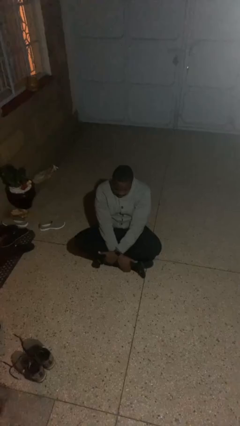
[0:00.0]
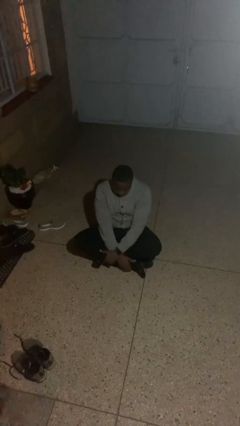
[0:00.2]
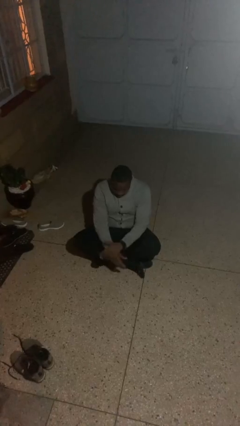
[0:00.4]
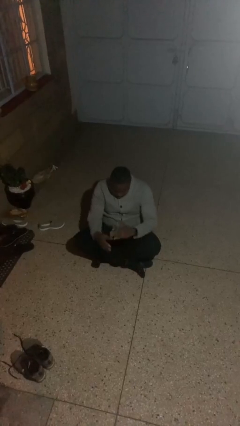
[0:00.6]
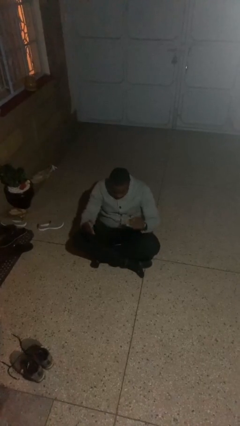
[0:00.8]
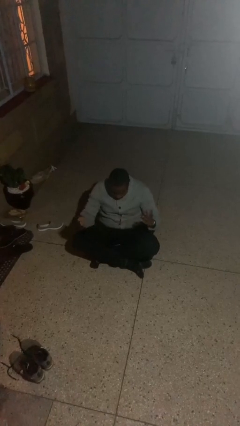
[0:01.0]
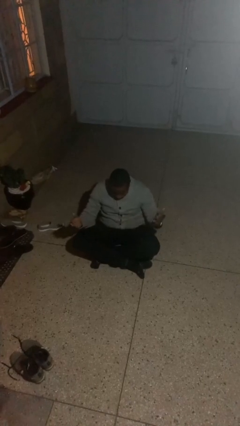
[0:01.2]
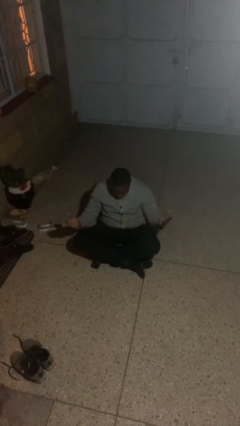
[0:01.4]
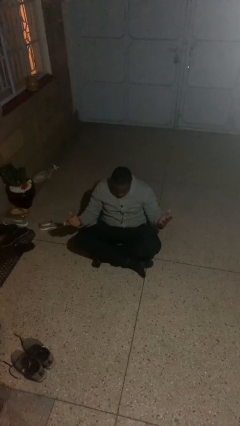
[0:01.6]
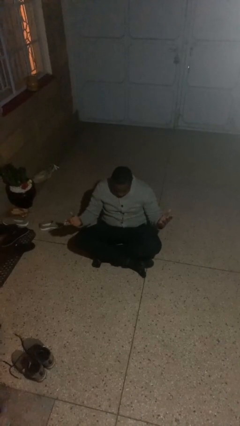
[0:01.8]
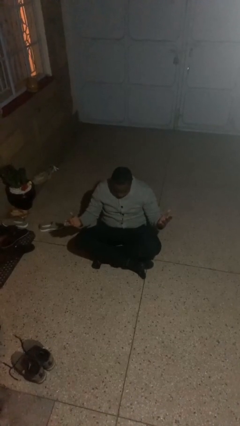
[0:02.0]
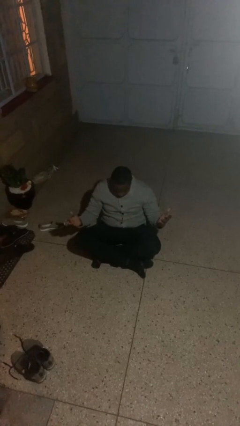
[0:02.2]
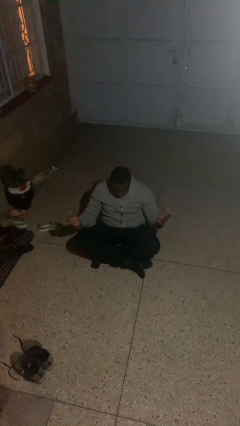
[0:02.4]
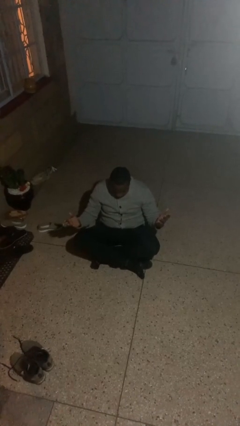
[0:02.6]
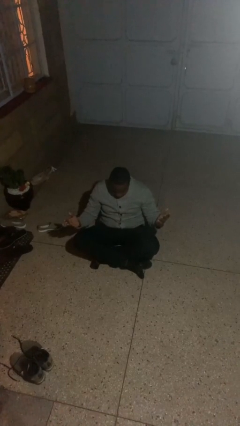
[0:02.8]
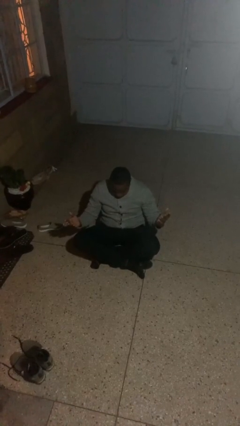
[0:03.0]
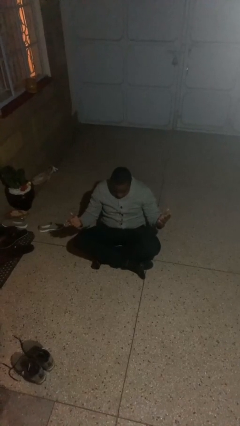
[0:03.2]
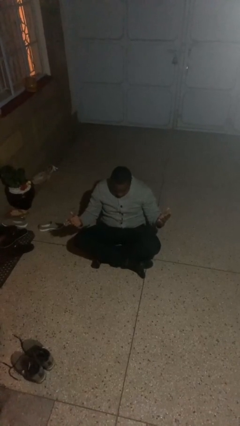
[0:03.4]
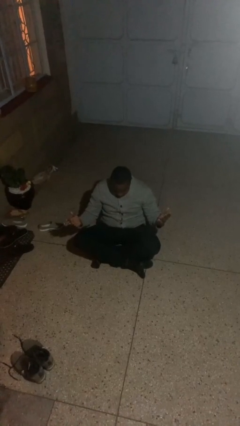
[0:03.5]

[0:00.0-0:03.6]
person prays

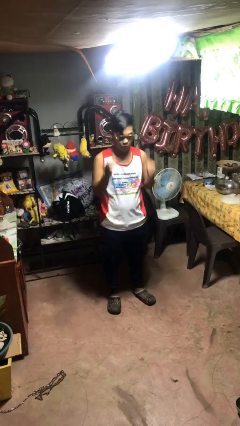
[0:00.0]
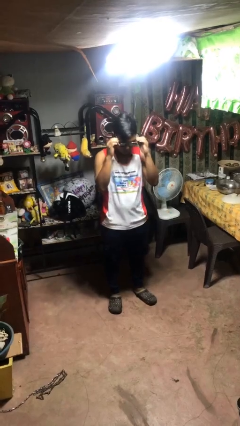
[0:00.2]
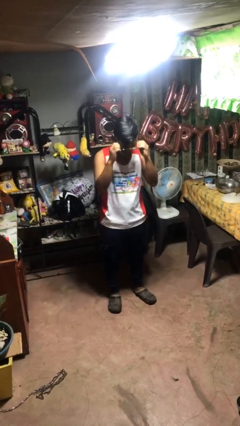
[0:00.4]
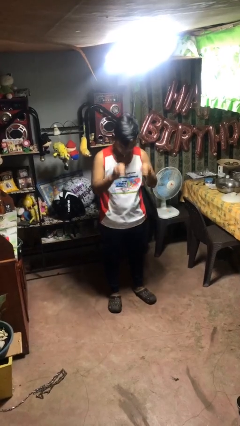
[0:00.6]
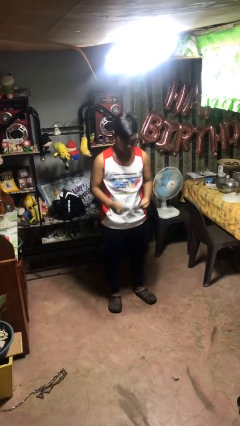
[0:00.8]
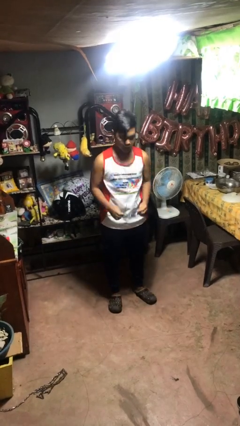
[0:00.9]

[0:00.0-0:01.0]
person takes off sunglasses

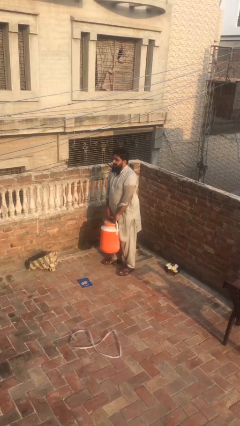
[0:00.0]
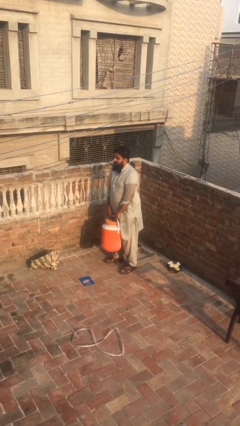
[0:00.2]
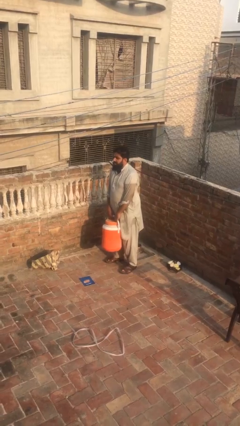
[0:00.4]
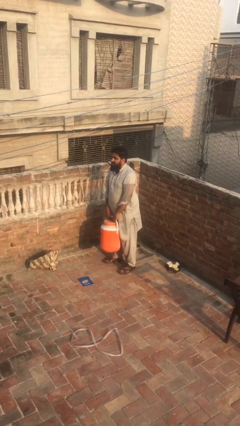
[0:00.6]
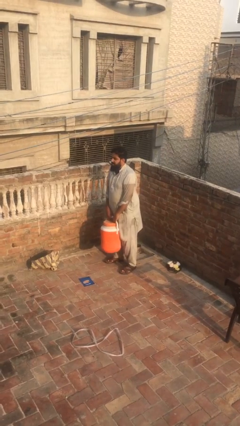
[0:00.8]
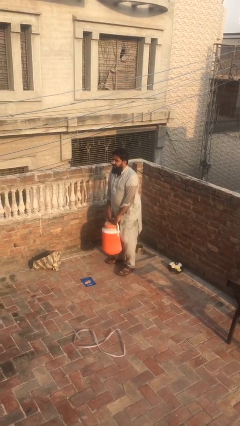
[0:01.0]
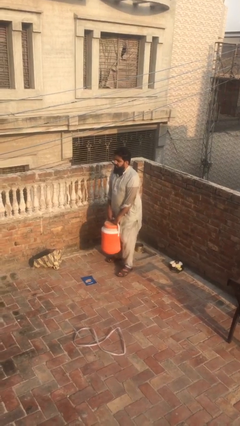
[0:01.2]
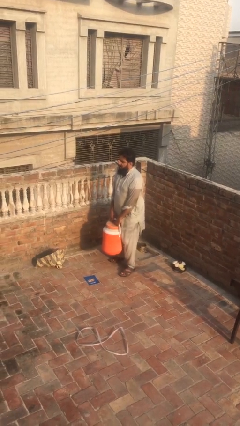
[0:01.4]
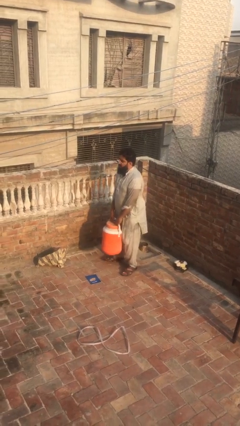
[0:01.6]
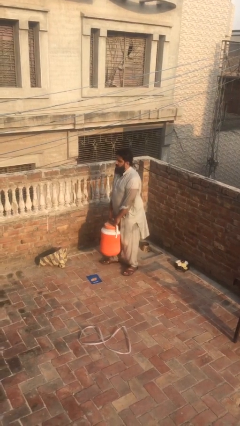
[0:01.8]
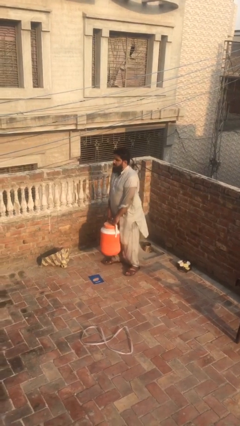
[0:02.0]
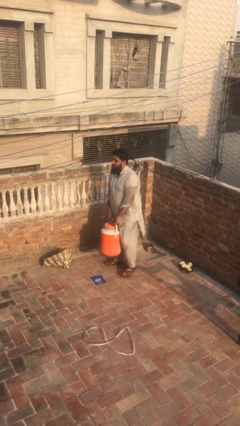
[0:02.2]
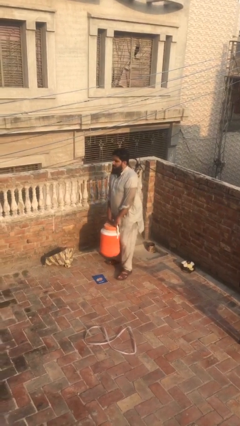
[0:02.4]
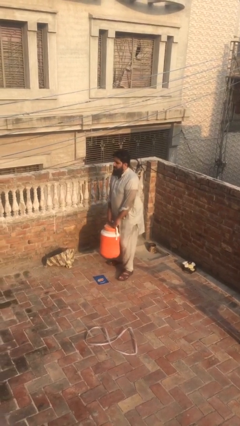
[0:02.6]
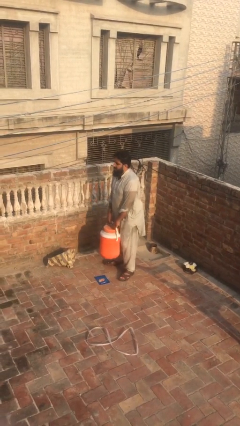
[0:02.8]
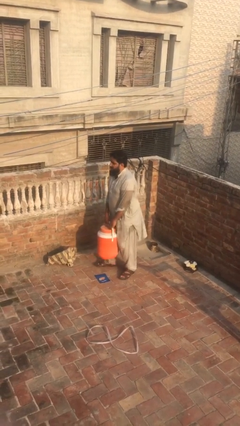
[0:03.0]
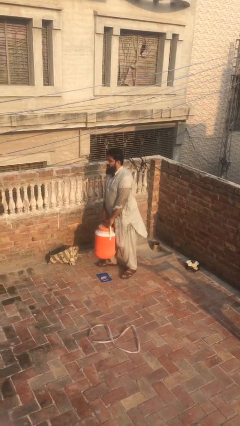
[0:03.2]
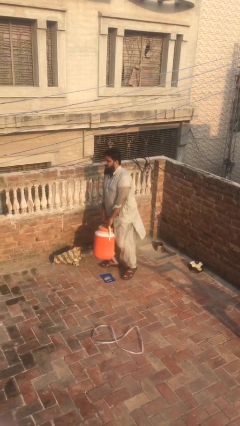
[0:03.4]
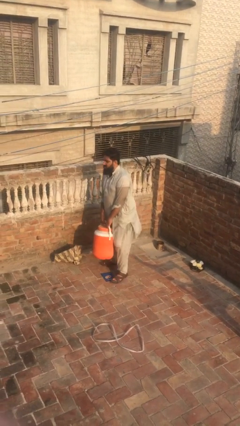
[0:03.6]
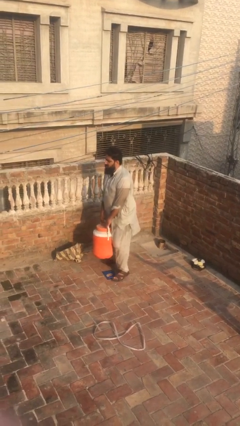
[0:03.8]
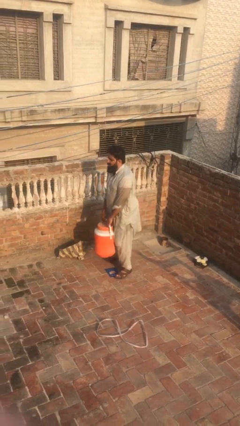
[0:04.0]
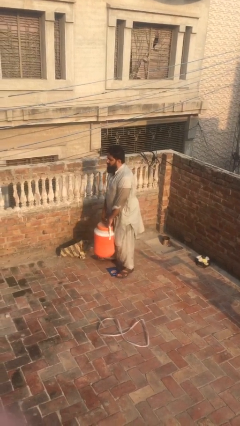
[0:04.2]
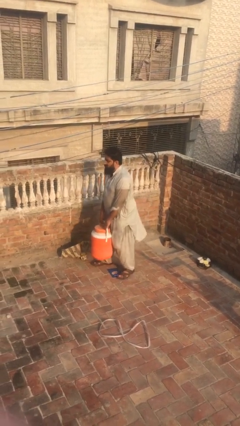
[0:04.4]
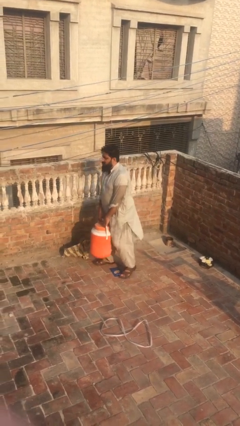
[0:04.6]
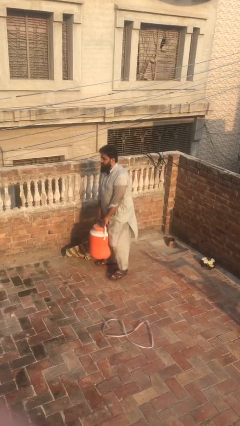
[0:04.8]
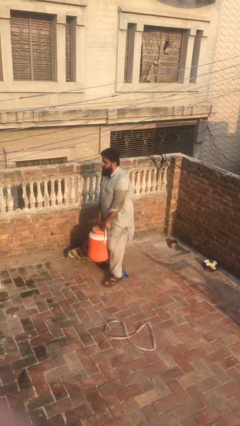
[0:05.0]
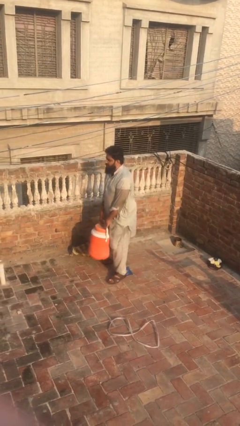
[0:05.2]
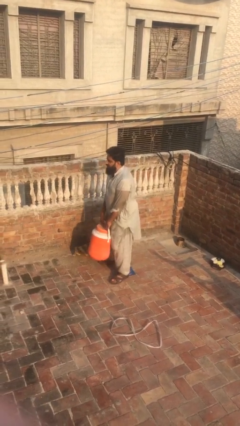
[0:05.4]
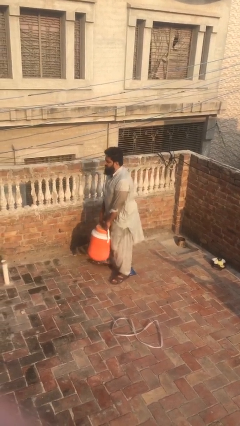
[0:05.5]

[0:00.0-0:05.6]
person carries heavy object

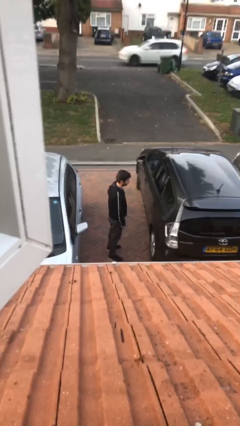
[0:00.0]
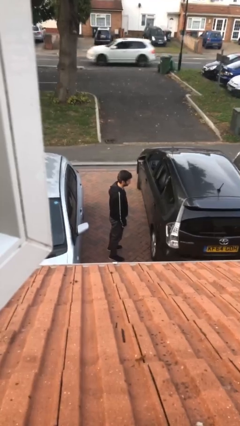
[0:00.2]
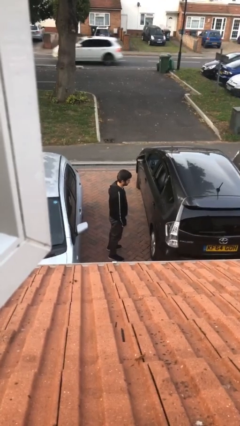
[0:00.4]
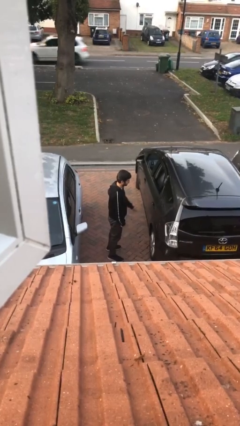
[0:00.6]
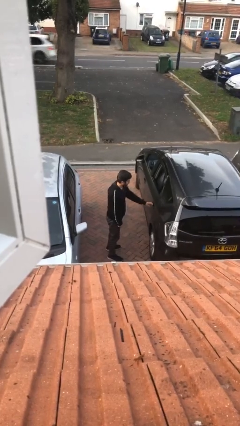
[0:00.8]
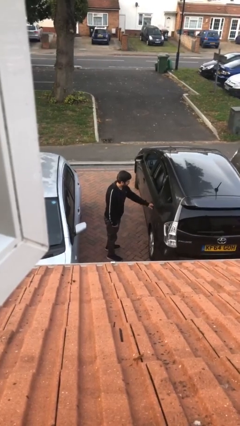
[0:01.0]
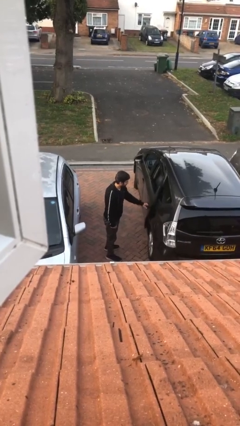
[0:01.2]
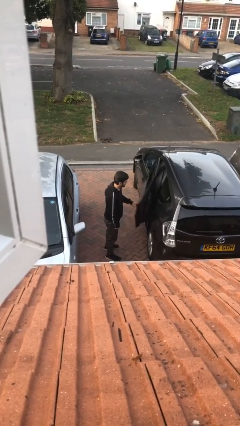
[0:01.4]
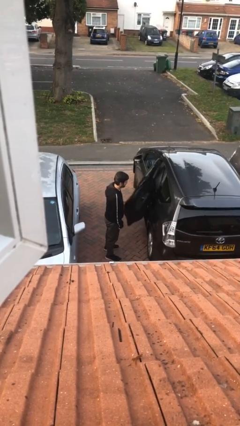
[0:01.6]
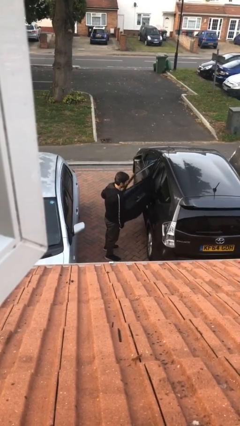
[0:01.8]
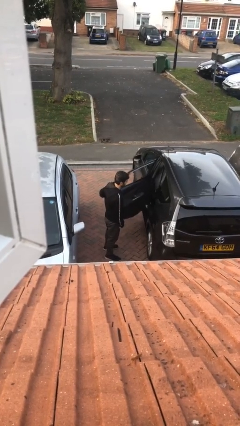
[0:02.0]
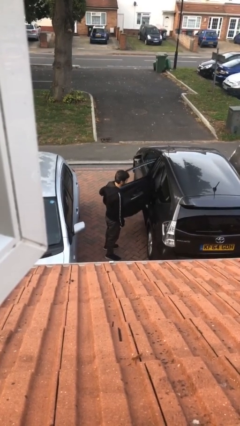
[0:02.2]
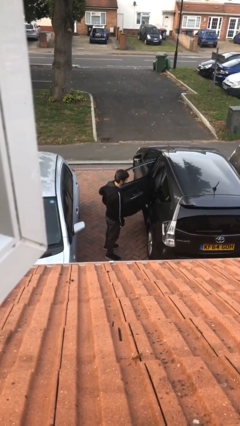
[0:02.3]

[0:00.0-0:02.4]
person opens car door

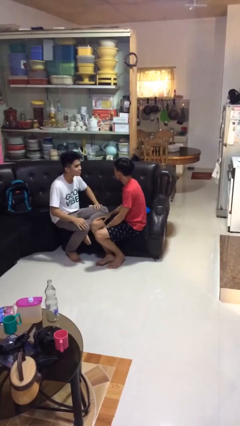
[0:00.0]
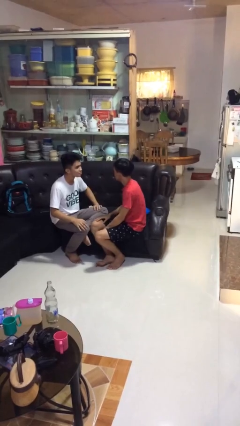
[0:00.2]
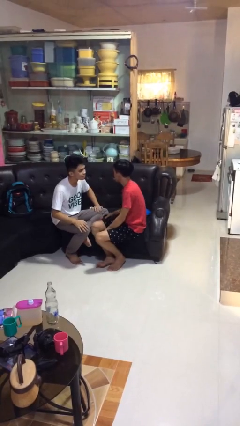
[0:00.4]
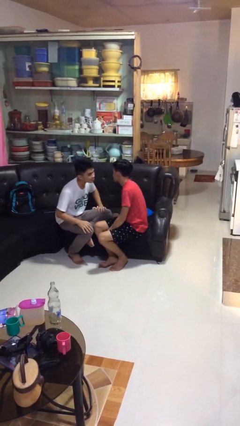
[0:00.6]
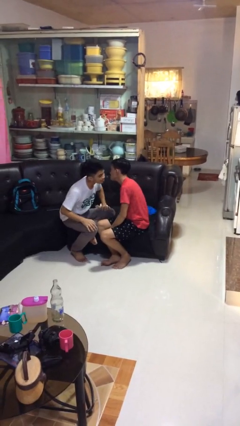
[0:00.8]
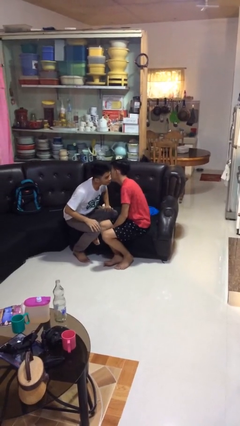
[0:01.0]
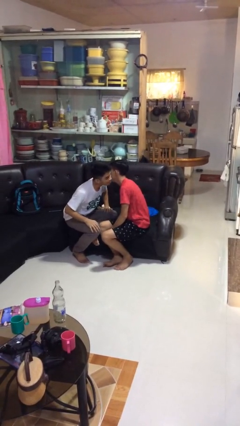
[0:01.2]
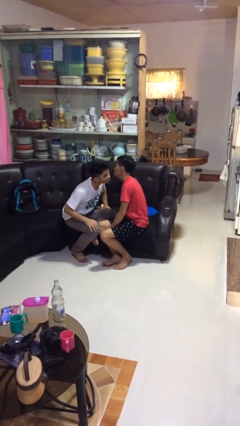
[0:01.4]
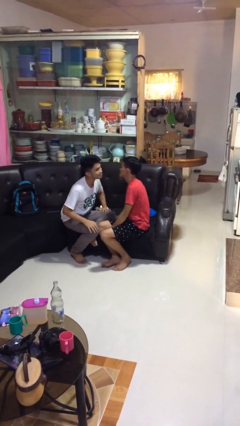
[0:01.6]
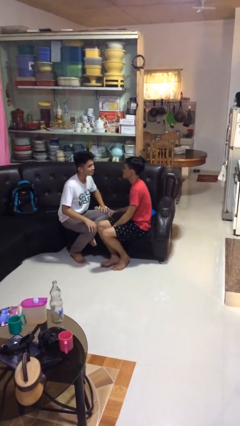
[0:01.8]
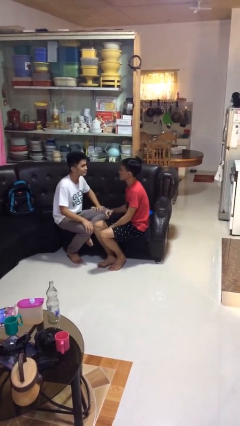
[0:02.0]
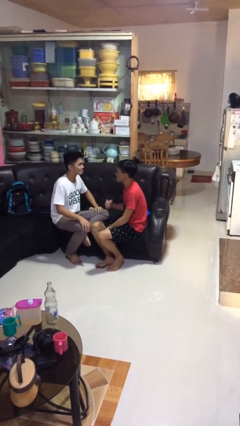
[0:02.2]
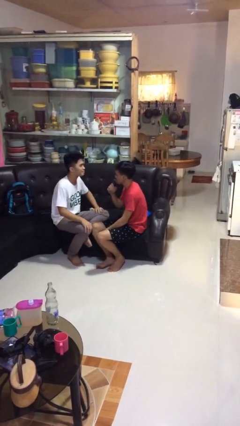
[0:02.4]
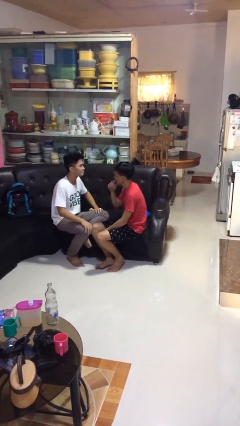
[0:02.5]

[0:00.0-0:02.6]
person kisses cheek of person

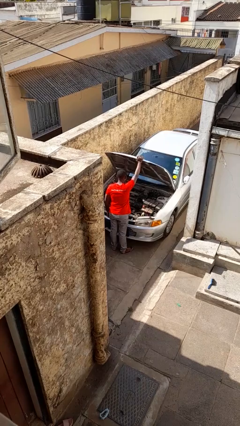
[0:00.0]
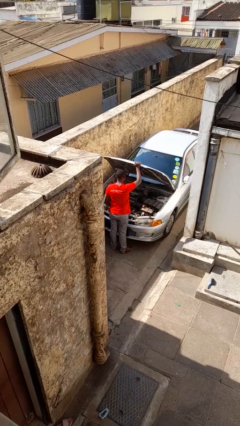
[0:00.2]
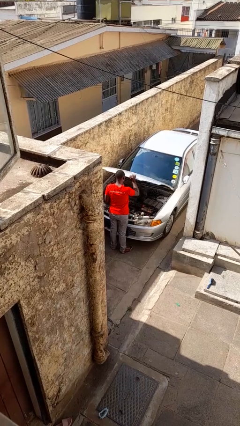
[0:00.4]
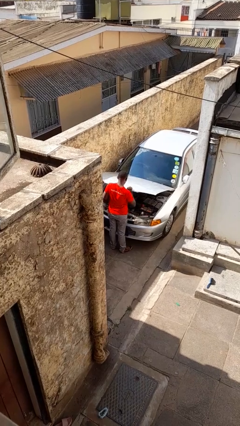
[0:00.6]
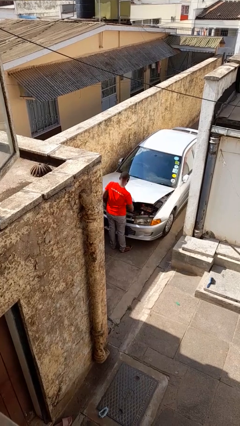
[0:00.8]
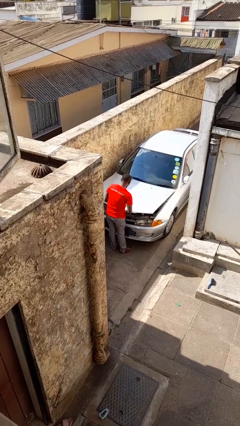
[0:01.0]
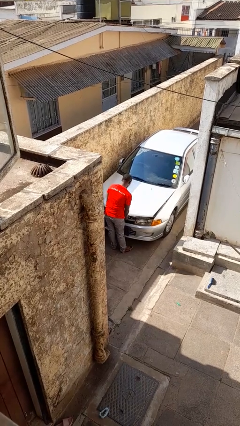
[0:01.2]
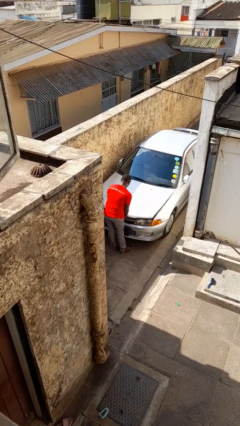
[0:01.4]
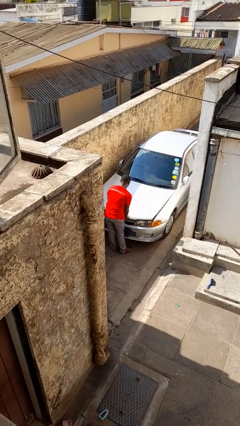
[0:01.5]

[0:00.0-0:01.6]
person closes car hood

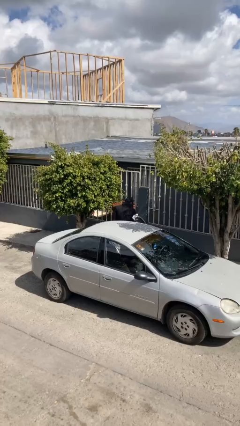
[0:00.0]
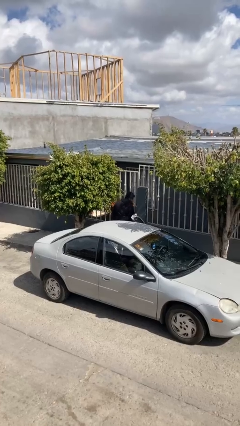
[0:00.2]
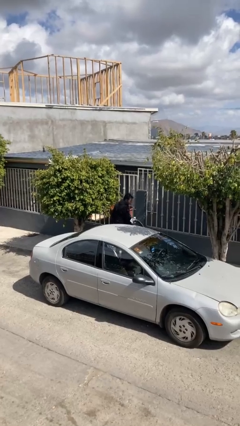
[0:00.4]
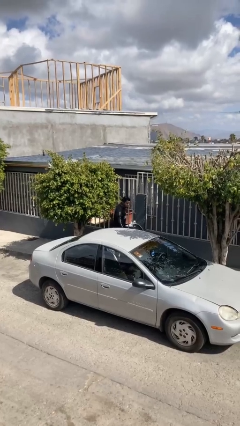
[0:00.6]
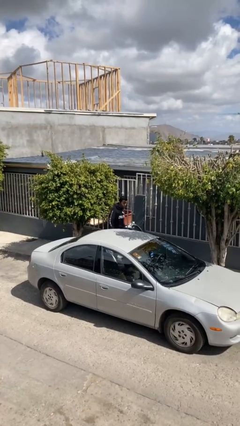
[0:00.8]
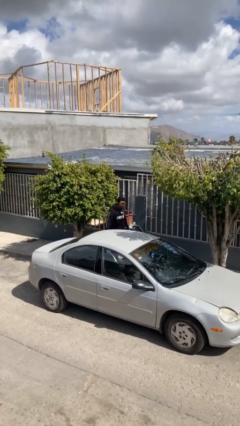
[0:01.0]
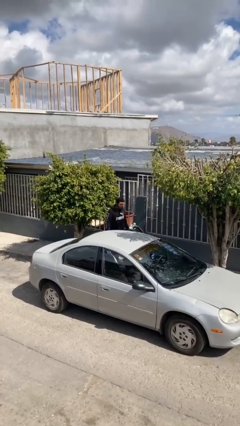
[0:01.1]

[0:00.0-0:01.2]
person exits car
